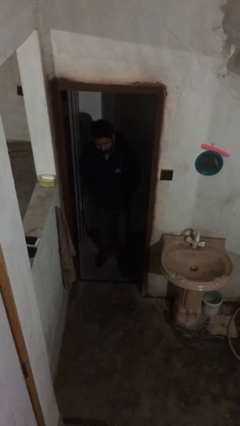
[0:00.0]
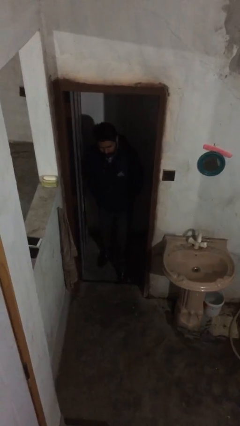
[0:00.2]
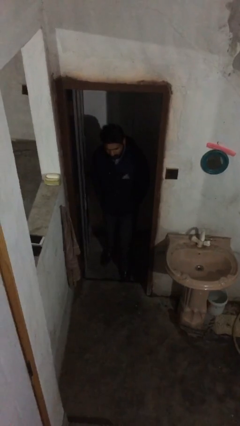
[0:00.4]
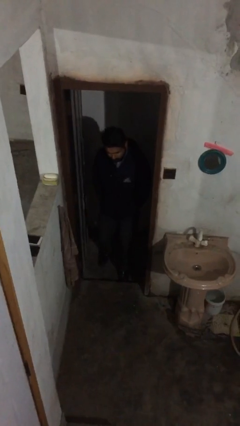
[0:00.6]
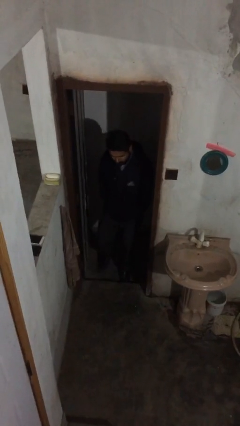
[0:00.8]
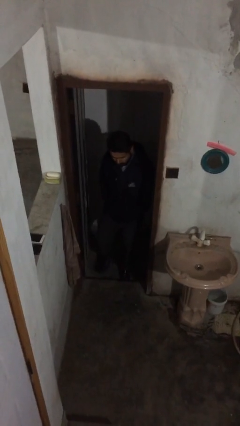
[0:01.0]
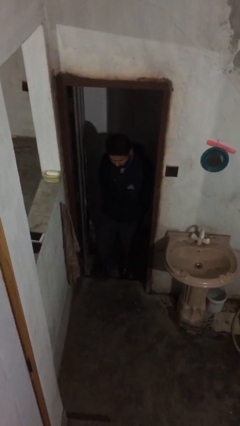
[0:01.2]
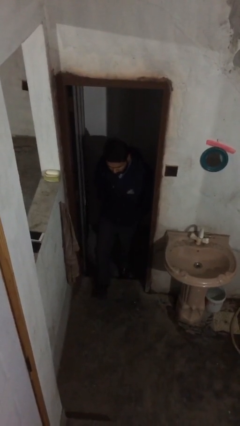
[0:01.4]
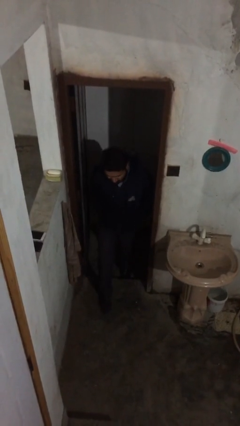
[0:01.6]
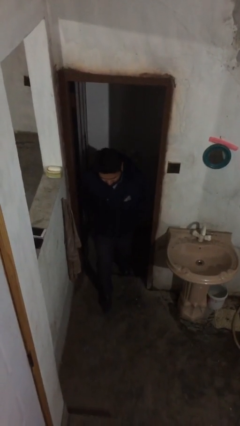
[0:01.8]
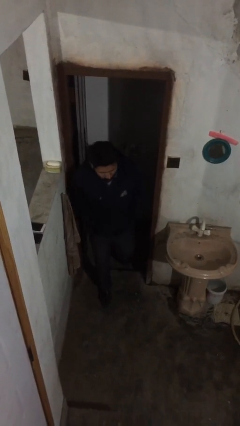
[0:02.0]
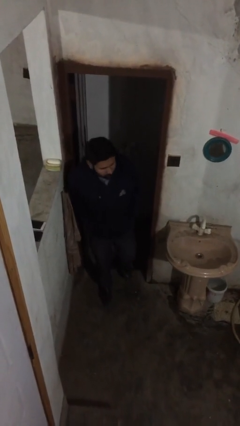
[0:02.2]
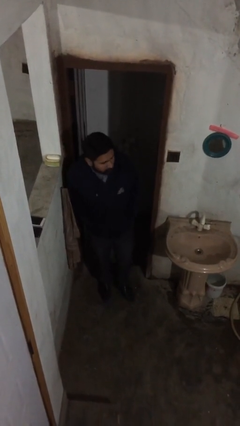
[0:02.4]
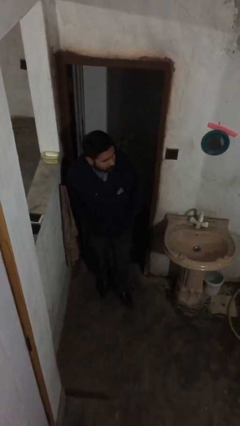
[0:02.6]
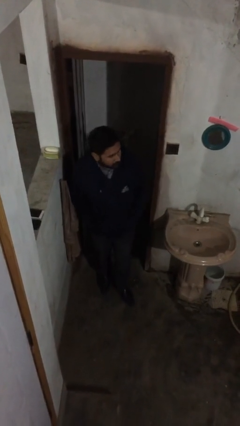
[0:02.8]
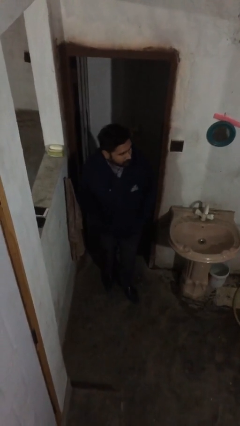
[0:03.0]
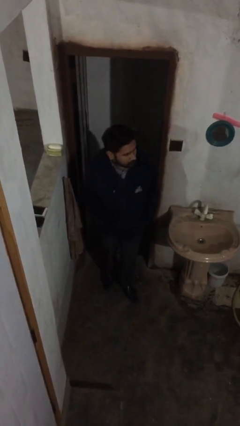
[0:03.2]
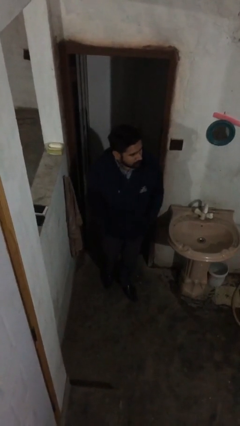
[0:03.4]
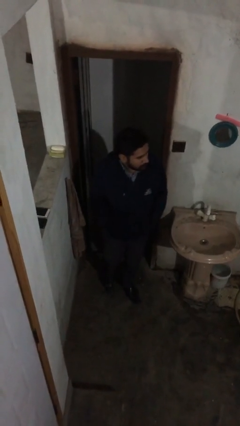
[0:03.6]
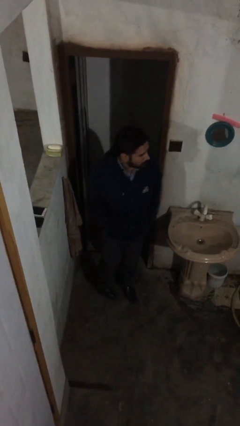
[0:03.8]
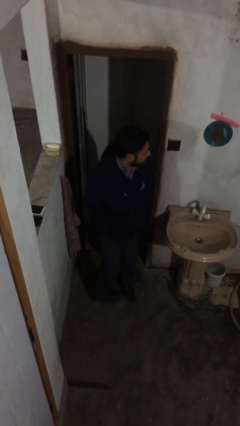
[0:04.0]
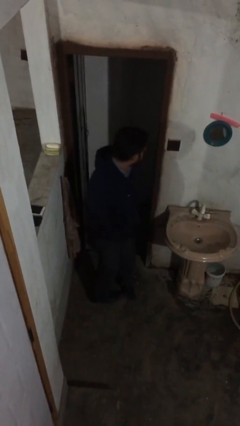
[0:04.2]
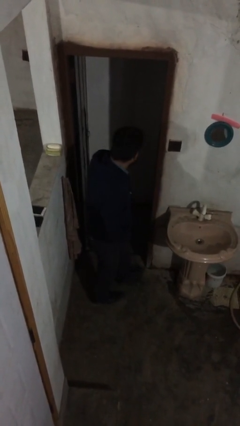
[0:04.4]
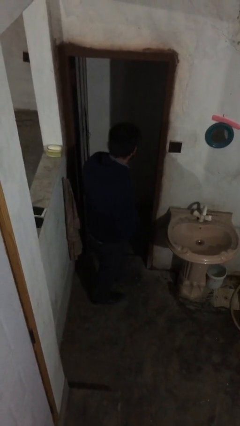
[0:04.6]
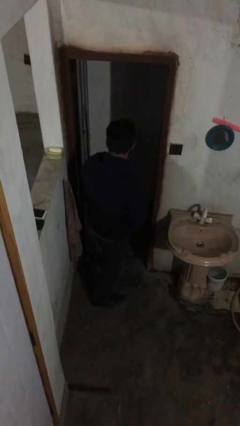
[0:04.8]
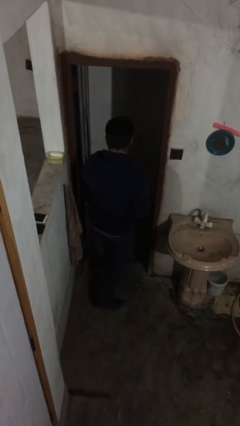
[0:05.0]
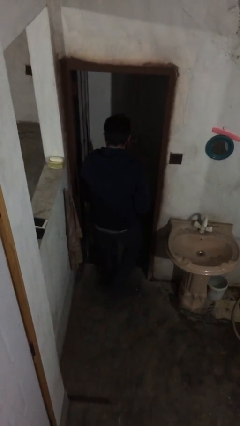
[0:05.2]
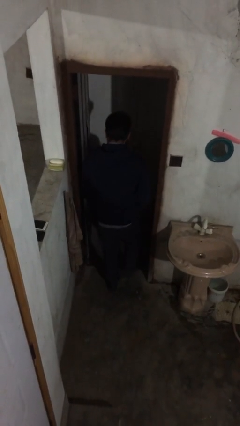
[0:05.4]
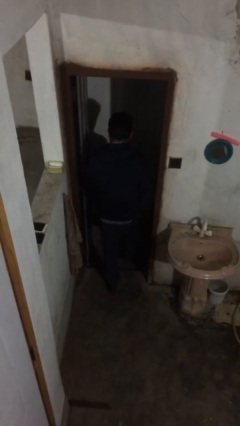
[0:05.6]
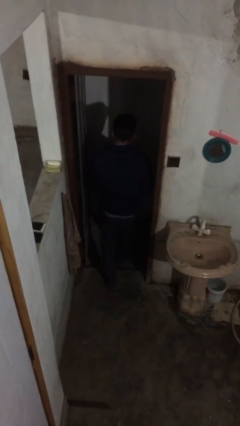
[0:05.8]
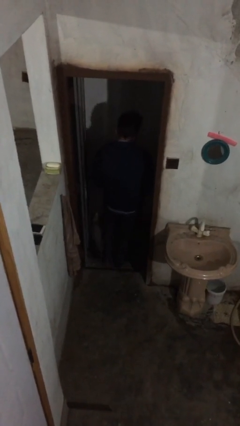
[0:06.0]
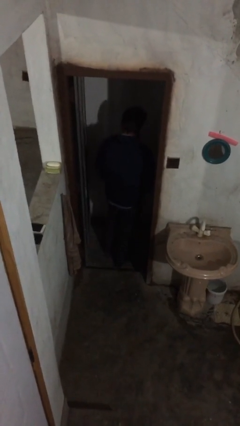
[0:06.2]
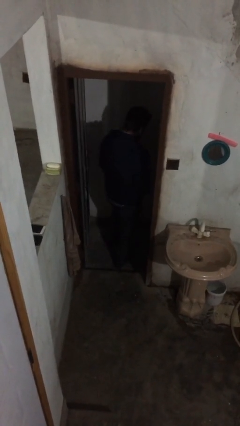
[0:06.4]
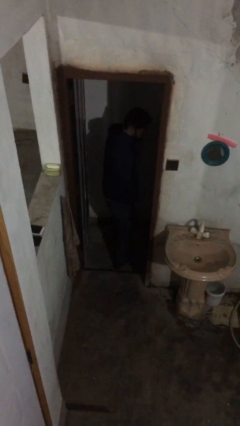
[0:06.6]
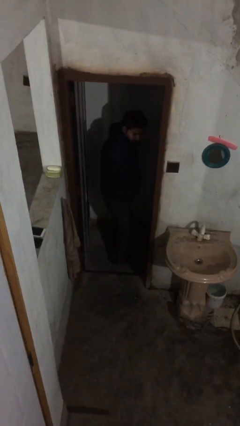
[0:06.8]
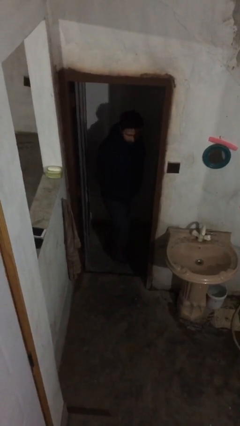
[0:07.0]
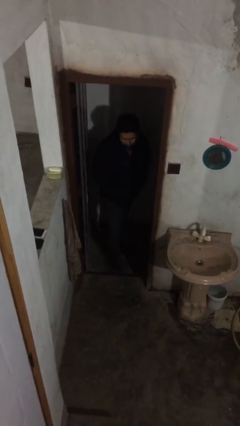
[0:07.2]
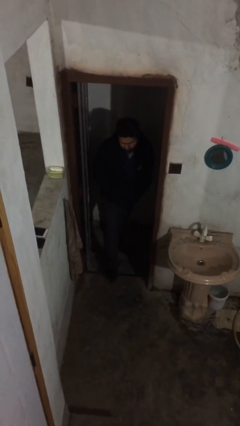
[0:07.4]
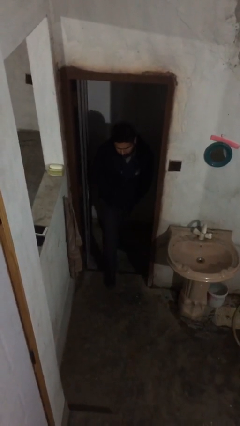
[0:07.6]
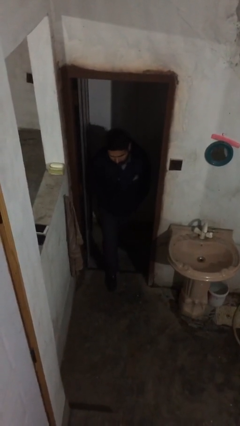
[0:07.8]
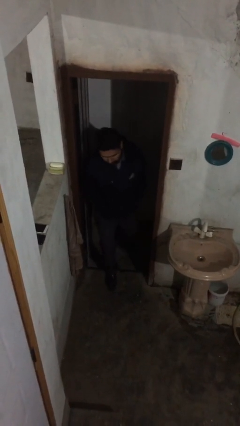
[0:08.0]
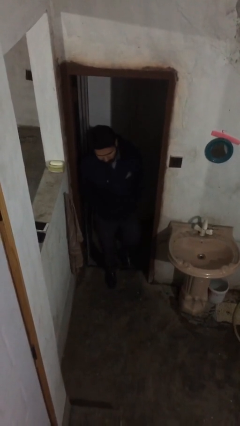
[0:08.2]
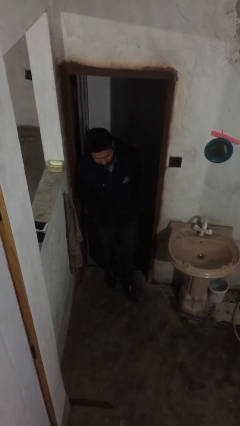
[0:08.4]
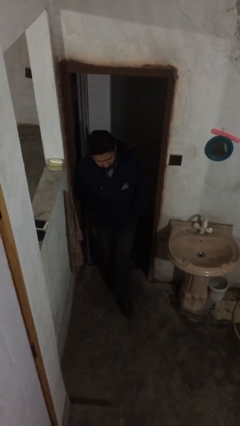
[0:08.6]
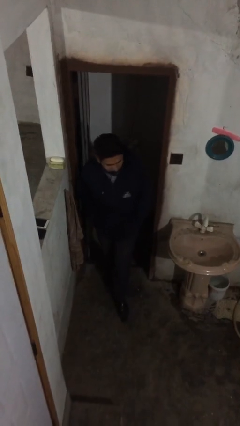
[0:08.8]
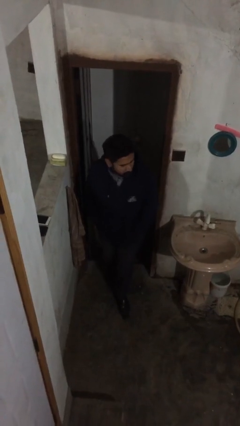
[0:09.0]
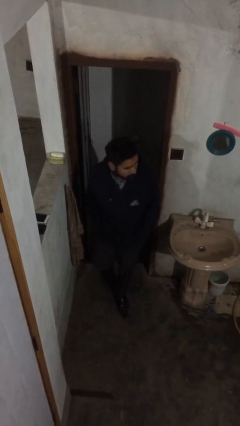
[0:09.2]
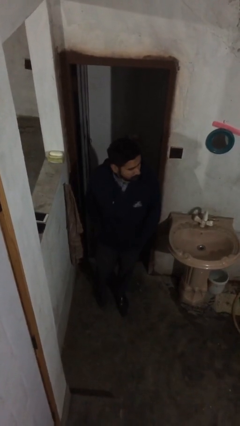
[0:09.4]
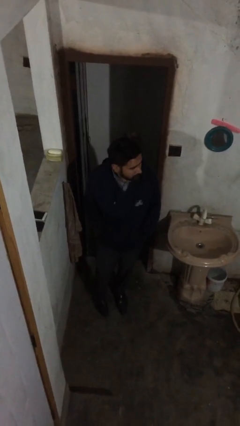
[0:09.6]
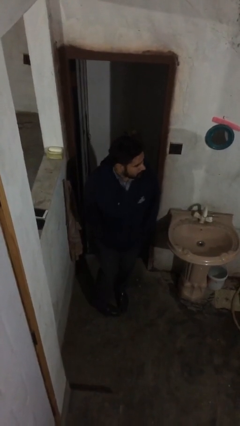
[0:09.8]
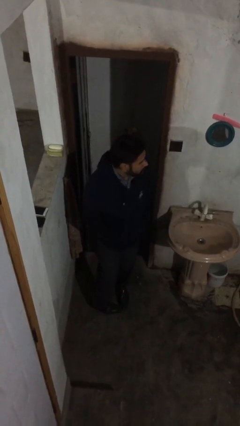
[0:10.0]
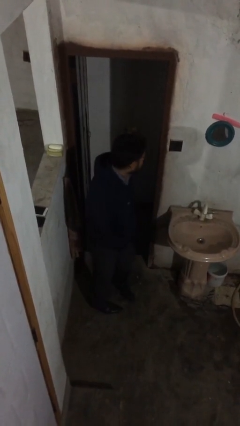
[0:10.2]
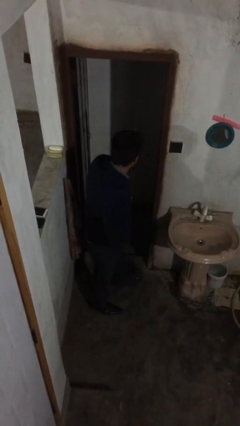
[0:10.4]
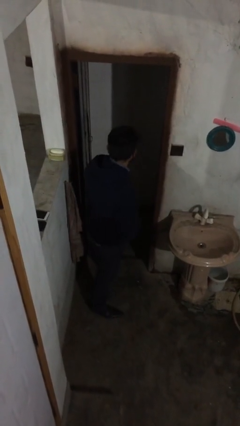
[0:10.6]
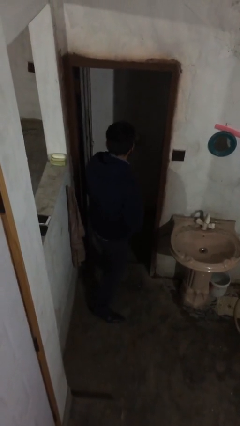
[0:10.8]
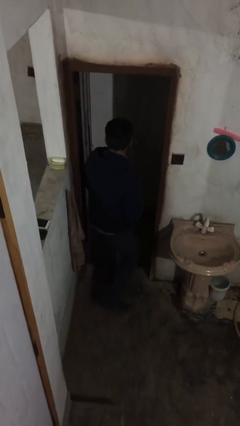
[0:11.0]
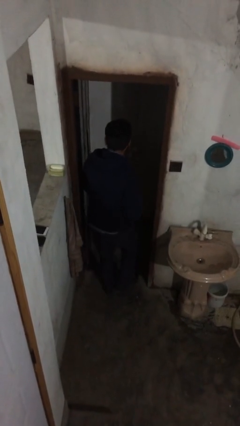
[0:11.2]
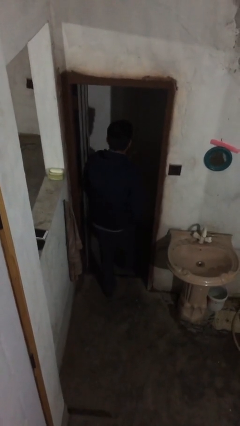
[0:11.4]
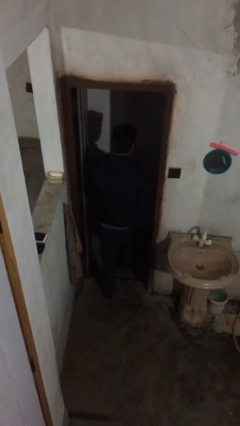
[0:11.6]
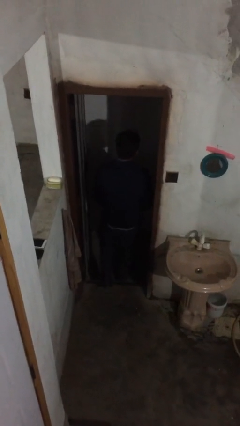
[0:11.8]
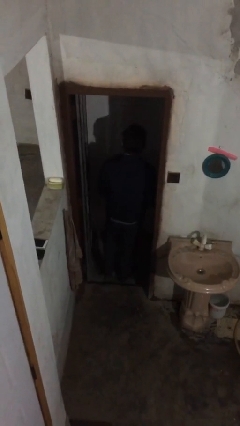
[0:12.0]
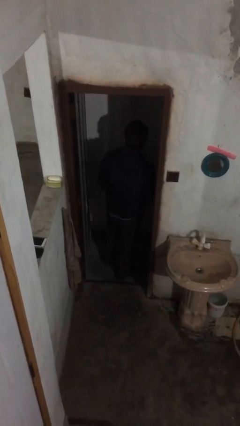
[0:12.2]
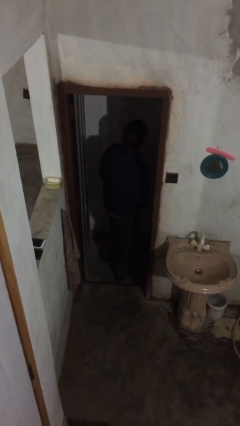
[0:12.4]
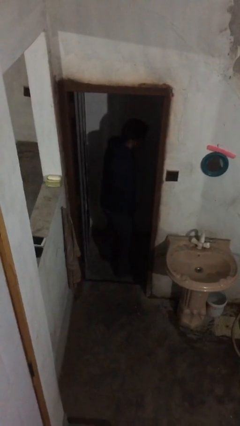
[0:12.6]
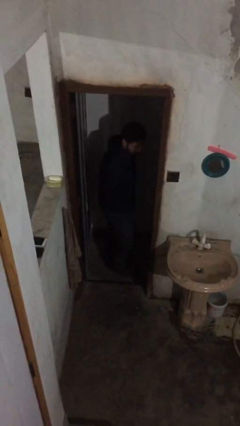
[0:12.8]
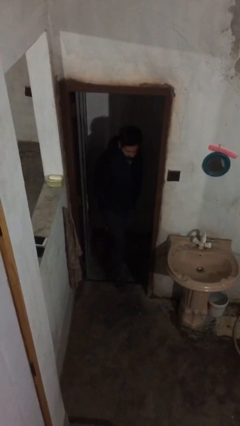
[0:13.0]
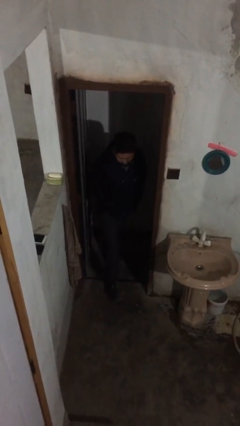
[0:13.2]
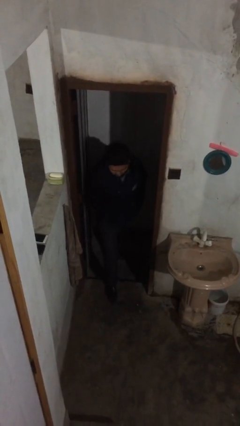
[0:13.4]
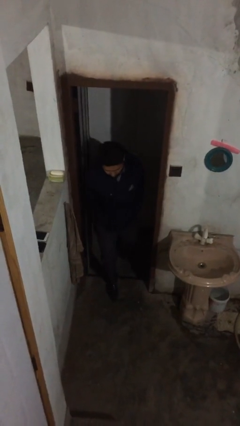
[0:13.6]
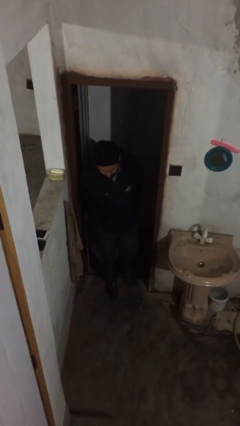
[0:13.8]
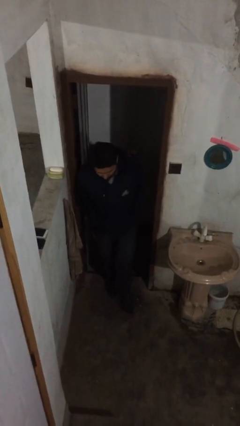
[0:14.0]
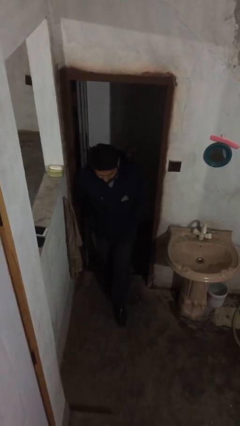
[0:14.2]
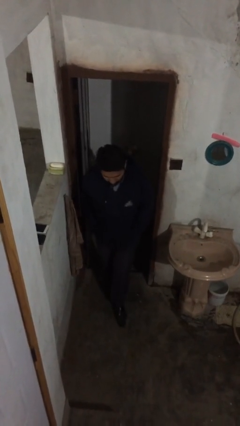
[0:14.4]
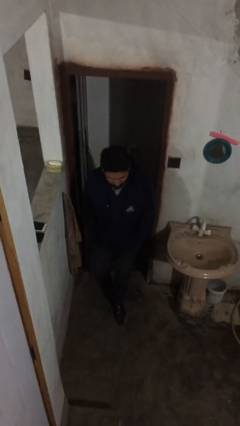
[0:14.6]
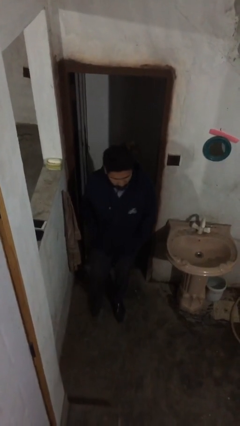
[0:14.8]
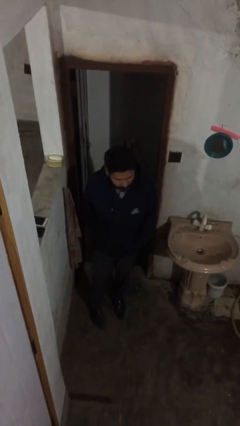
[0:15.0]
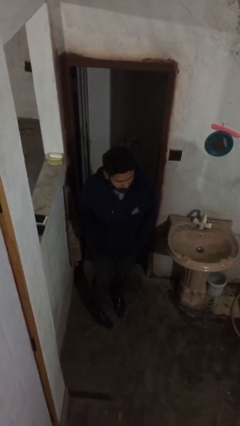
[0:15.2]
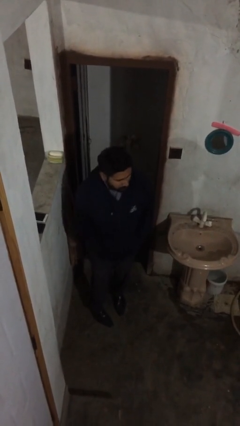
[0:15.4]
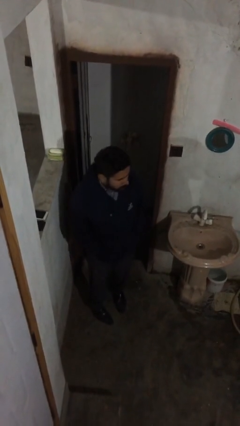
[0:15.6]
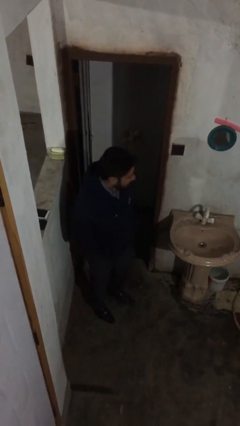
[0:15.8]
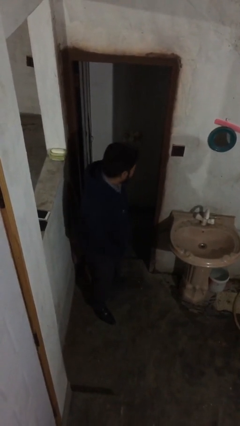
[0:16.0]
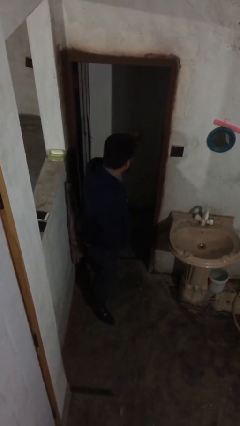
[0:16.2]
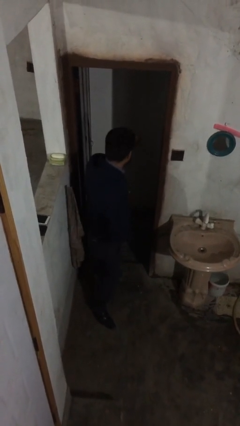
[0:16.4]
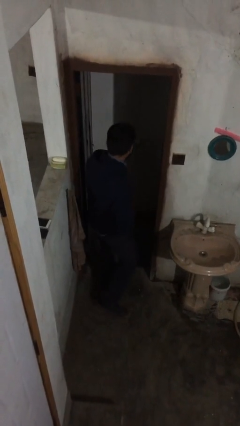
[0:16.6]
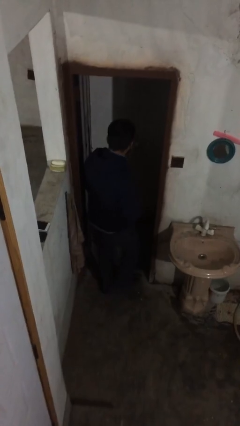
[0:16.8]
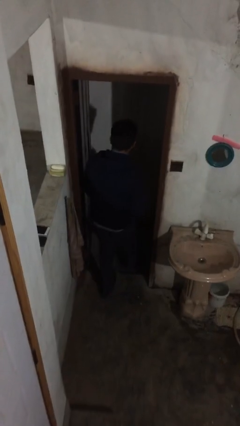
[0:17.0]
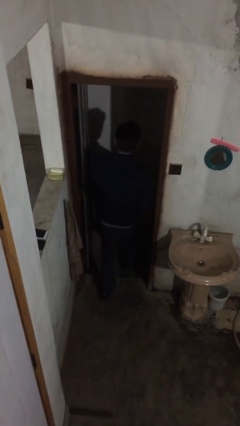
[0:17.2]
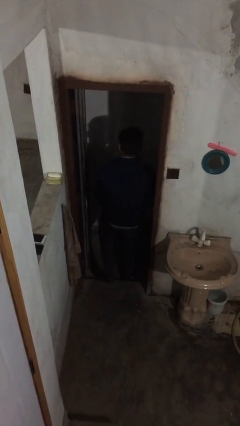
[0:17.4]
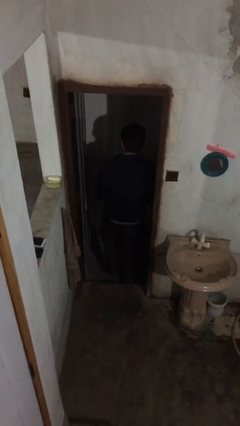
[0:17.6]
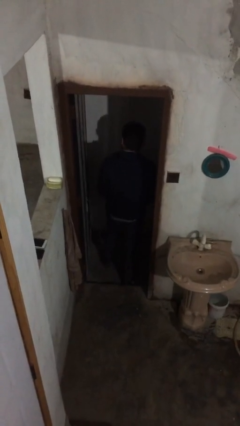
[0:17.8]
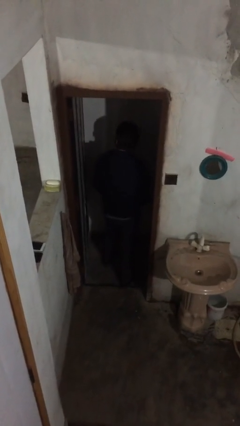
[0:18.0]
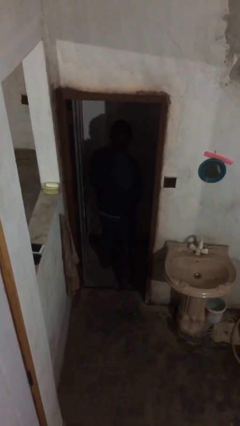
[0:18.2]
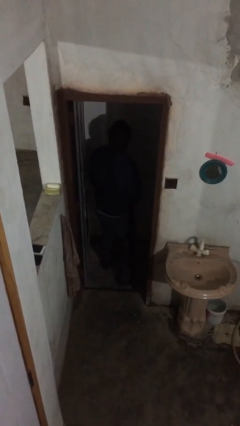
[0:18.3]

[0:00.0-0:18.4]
person texts on phone
